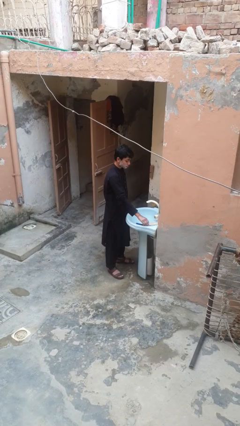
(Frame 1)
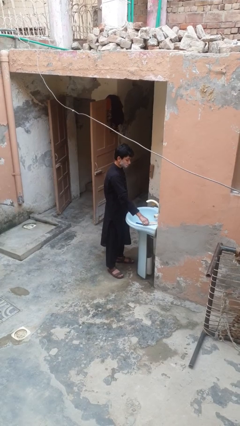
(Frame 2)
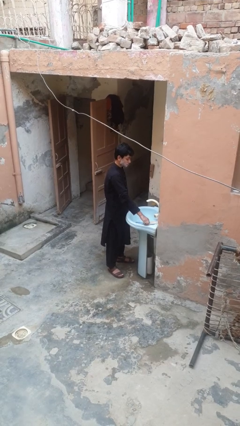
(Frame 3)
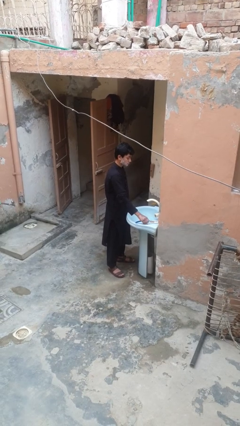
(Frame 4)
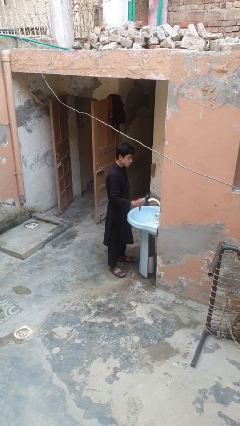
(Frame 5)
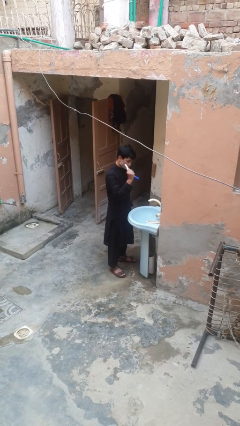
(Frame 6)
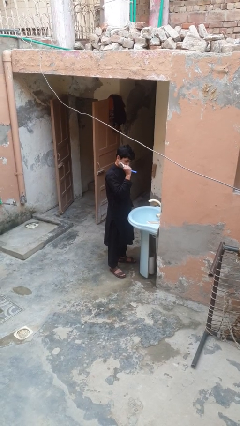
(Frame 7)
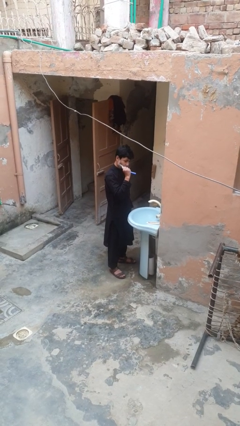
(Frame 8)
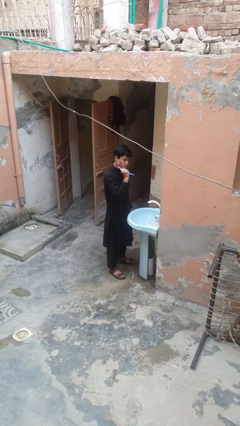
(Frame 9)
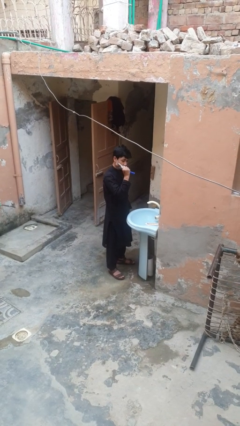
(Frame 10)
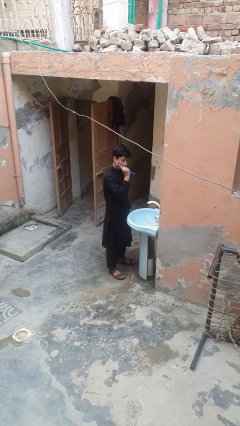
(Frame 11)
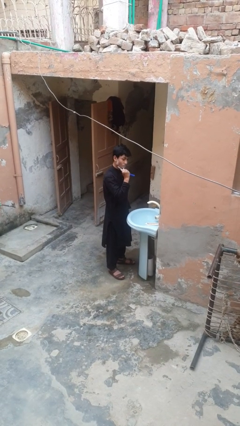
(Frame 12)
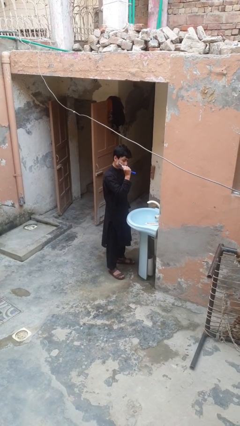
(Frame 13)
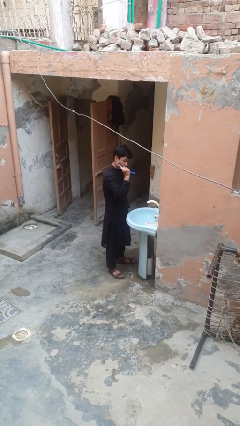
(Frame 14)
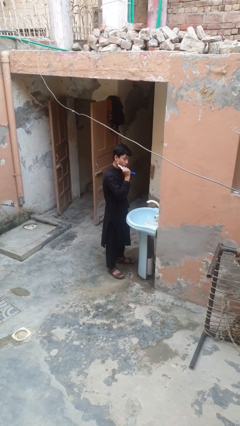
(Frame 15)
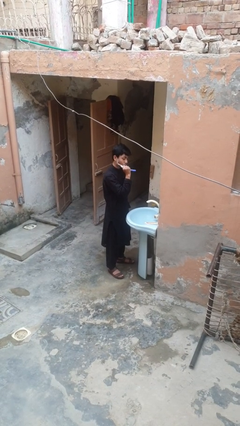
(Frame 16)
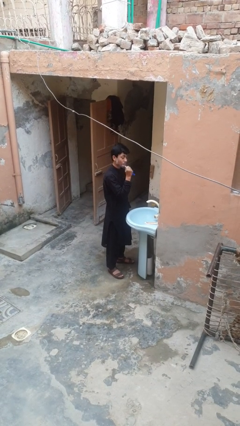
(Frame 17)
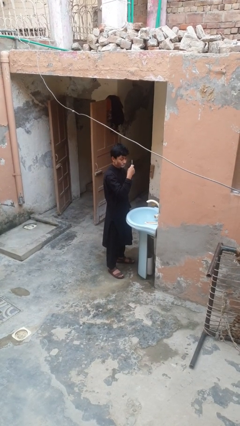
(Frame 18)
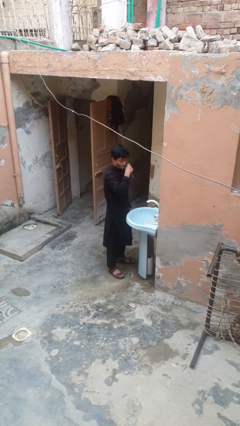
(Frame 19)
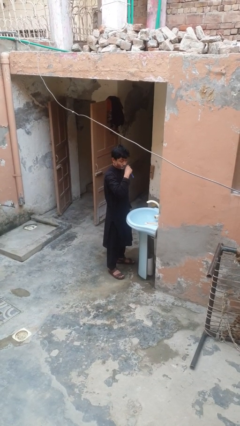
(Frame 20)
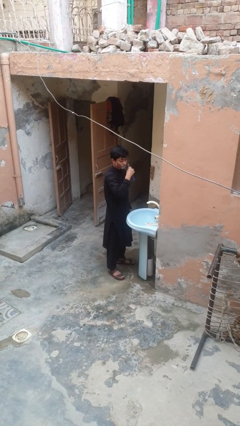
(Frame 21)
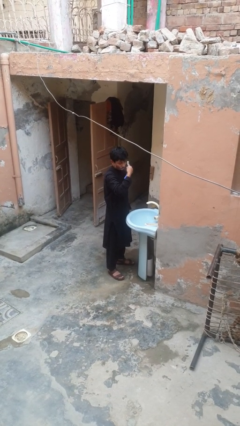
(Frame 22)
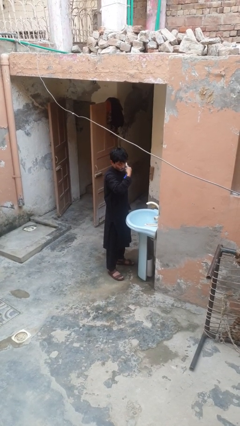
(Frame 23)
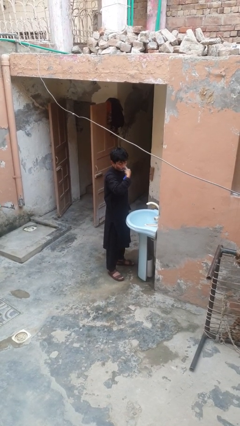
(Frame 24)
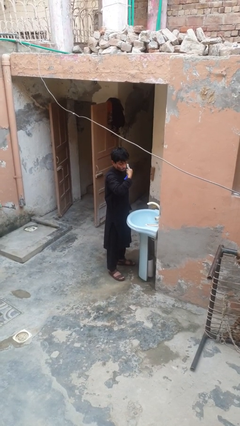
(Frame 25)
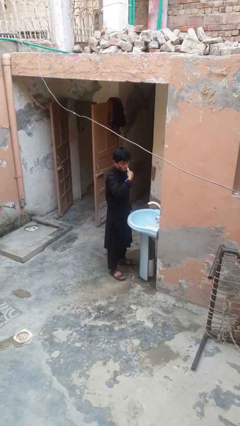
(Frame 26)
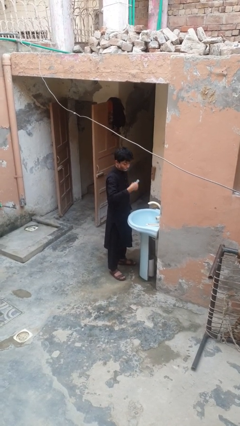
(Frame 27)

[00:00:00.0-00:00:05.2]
person shaves face

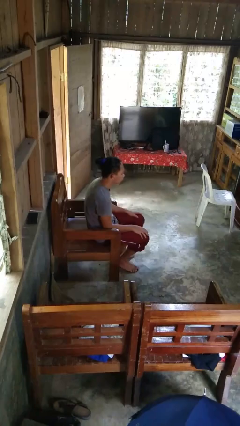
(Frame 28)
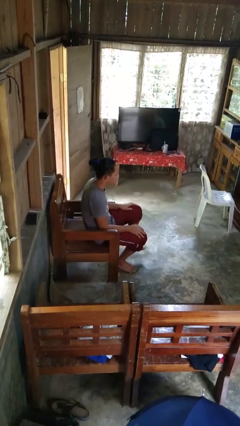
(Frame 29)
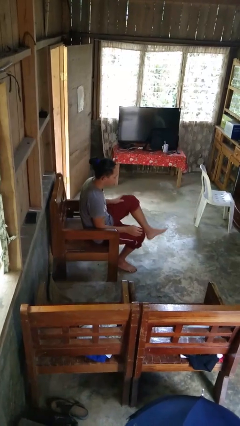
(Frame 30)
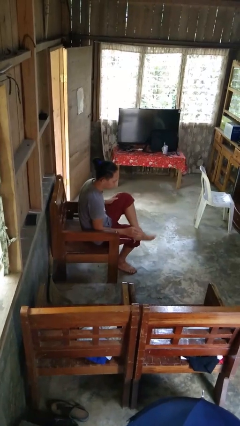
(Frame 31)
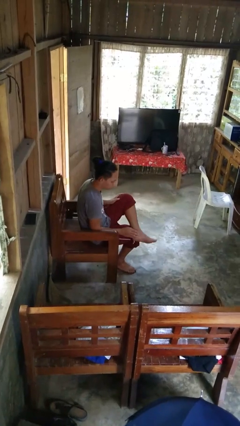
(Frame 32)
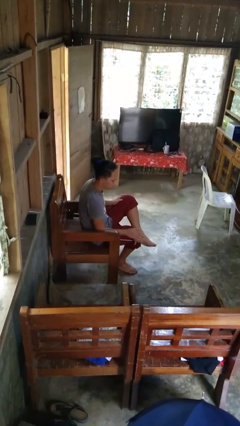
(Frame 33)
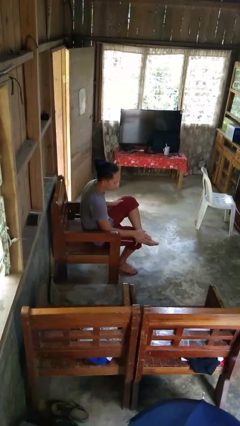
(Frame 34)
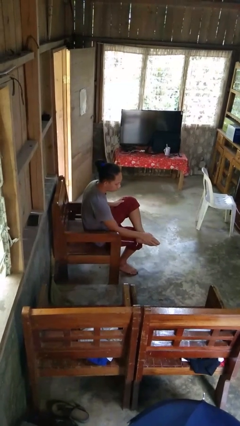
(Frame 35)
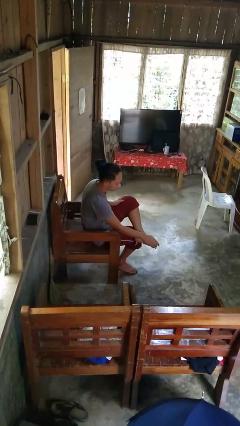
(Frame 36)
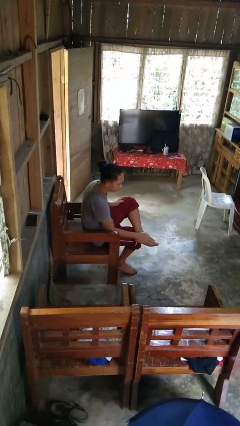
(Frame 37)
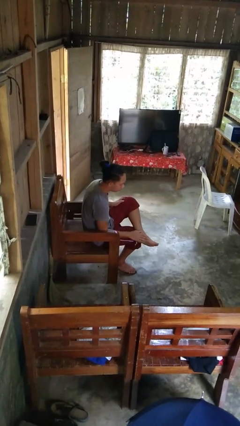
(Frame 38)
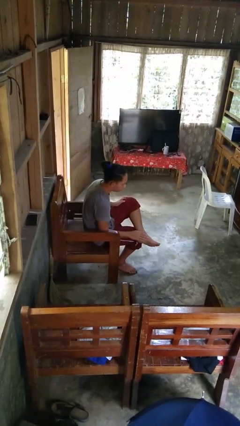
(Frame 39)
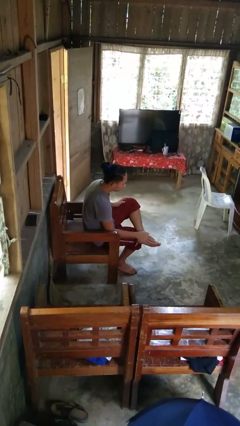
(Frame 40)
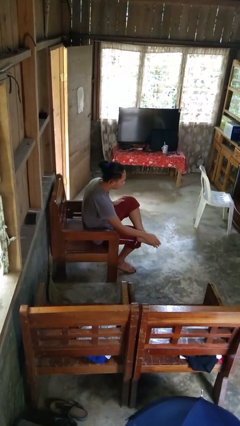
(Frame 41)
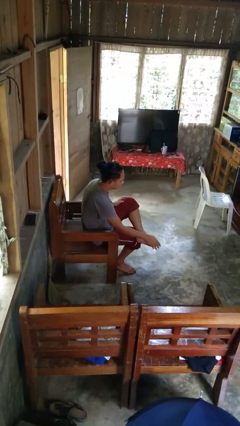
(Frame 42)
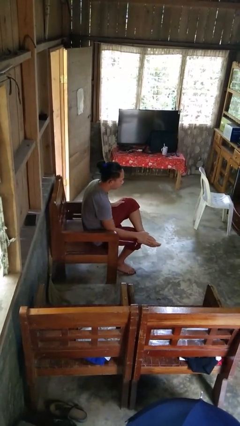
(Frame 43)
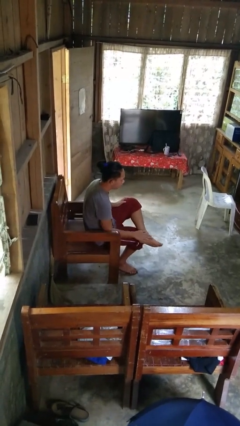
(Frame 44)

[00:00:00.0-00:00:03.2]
person rubs foot

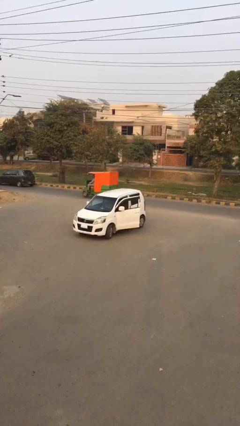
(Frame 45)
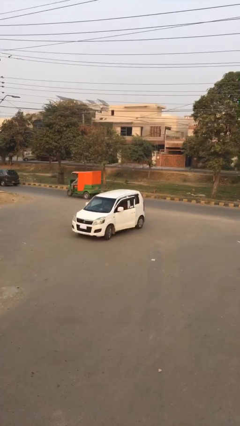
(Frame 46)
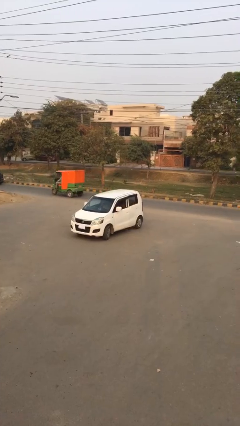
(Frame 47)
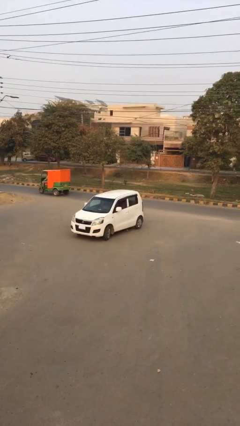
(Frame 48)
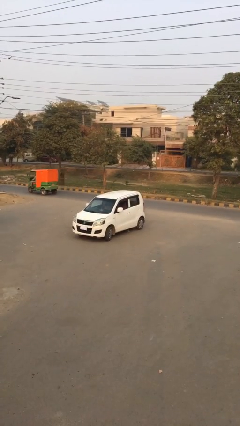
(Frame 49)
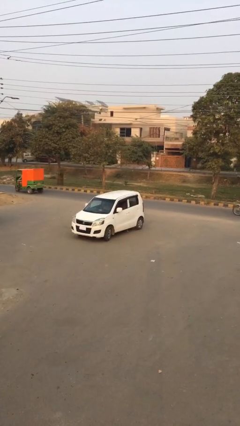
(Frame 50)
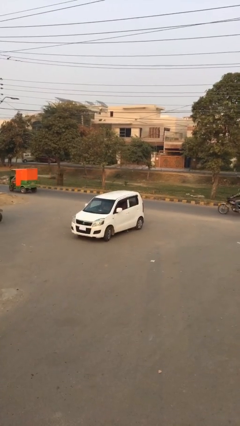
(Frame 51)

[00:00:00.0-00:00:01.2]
person closes car door

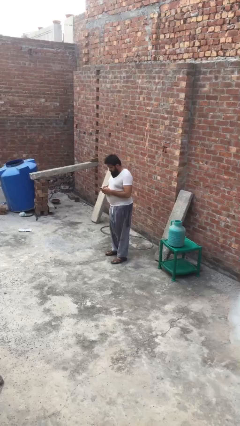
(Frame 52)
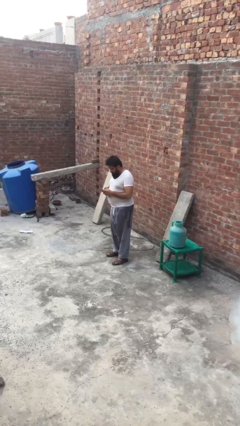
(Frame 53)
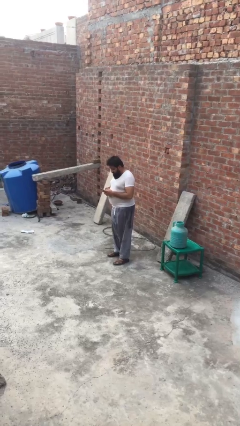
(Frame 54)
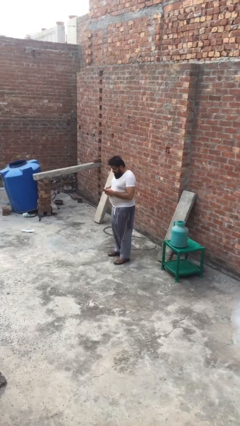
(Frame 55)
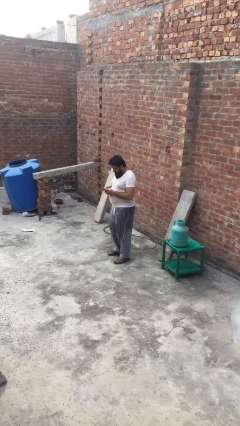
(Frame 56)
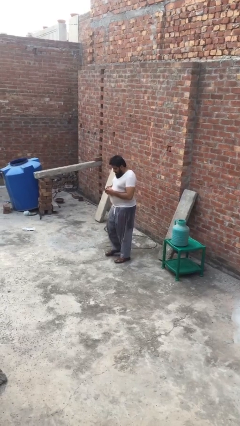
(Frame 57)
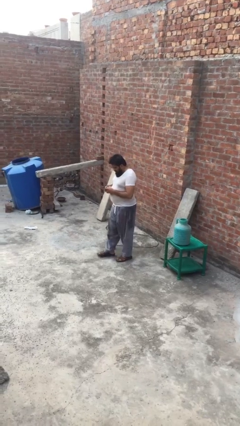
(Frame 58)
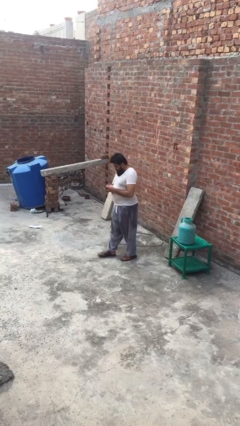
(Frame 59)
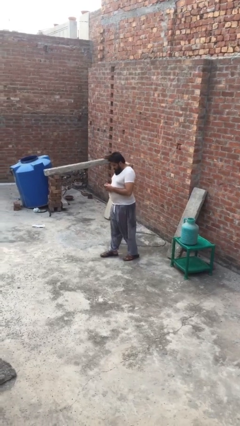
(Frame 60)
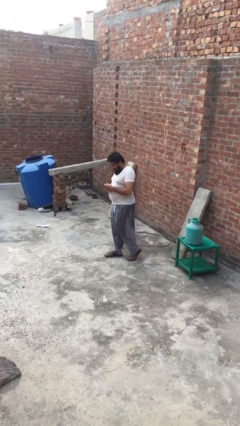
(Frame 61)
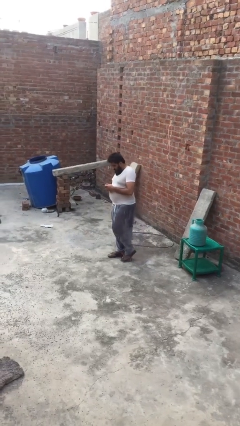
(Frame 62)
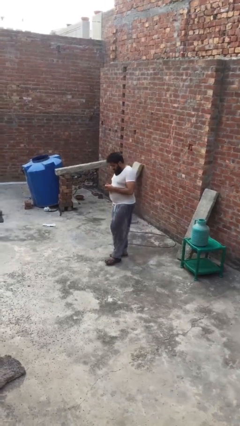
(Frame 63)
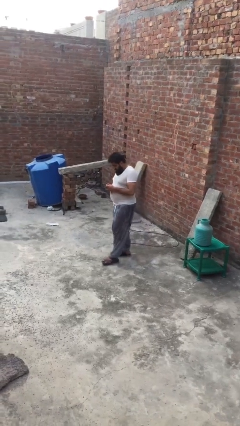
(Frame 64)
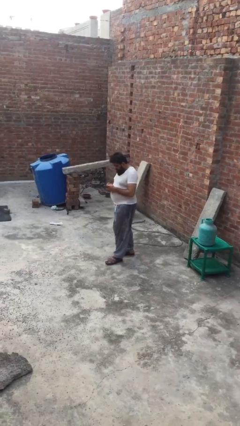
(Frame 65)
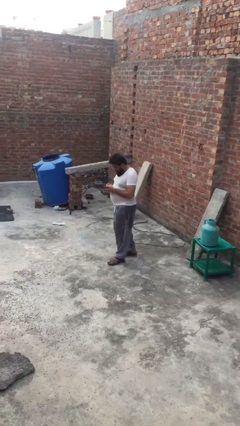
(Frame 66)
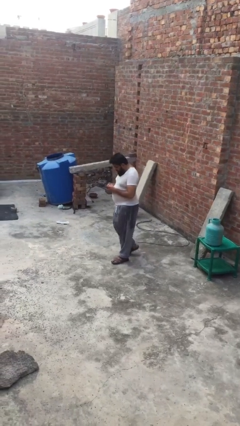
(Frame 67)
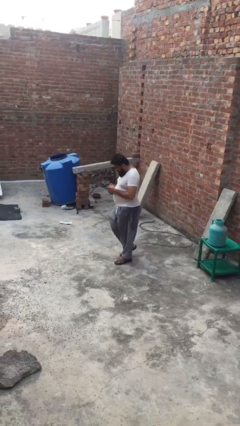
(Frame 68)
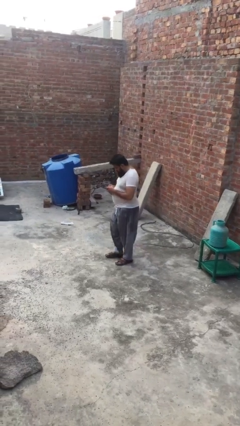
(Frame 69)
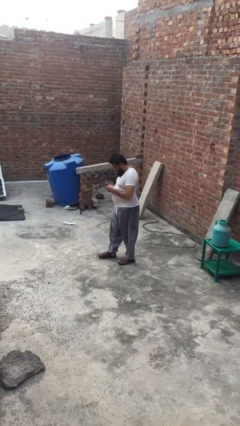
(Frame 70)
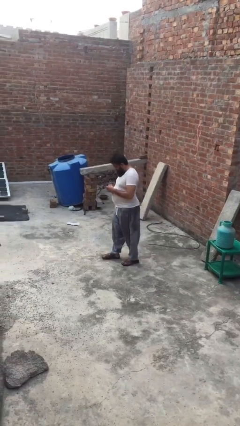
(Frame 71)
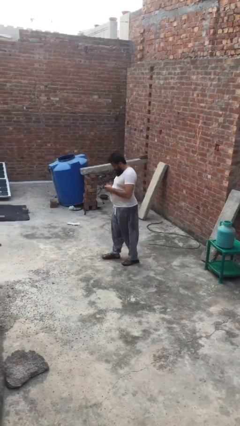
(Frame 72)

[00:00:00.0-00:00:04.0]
person texts on phone

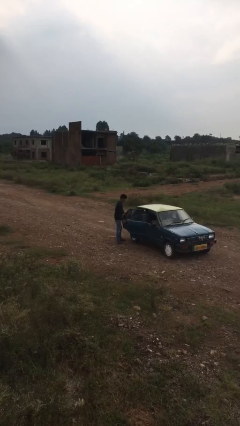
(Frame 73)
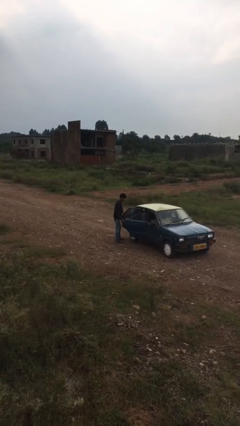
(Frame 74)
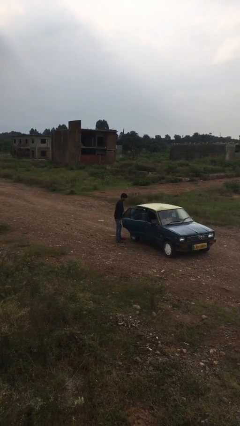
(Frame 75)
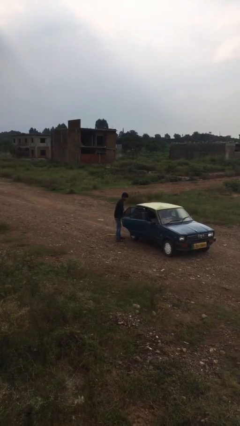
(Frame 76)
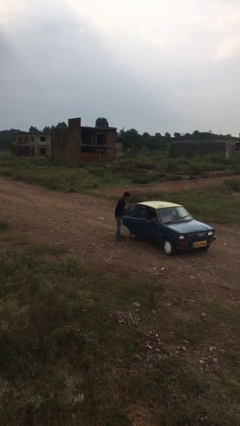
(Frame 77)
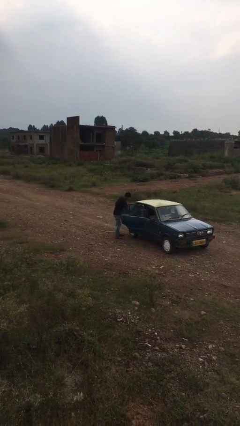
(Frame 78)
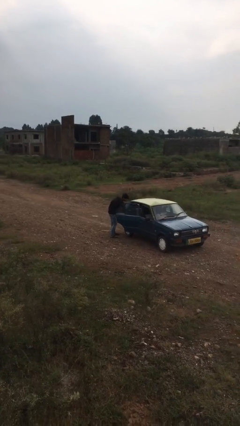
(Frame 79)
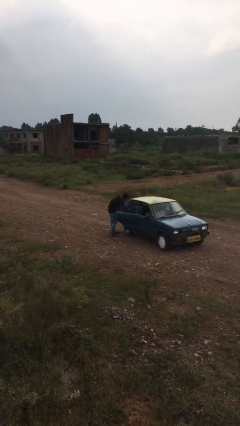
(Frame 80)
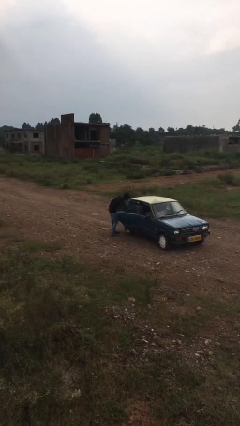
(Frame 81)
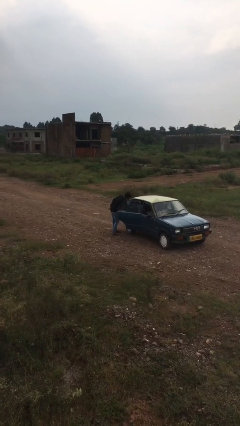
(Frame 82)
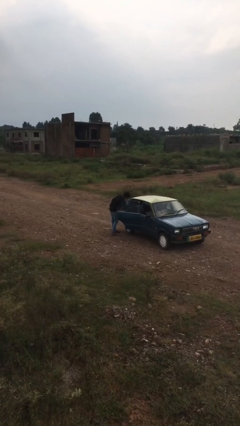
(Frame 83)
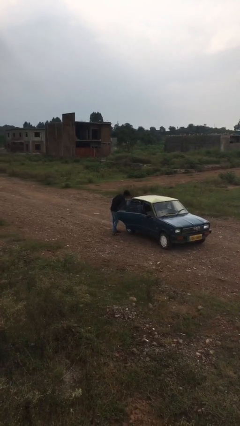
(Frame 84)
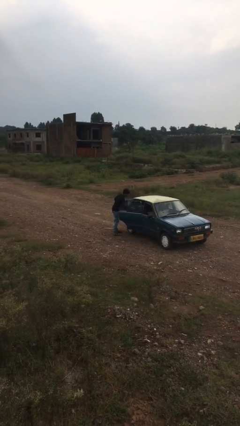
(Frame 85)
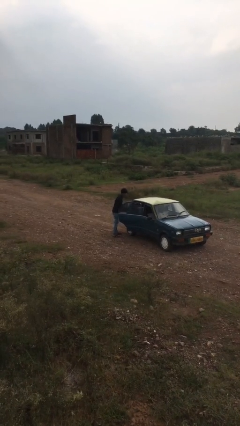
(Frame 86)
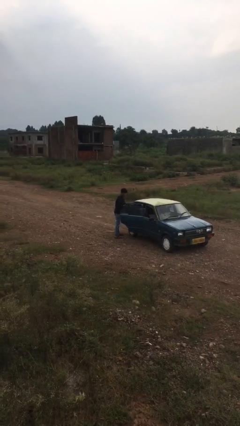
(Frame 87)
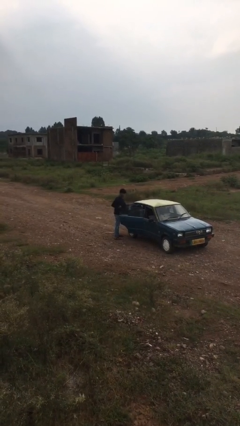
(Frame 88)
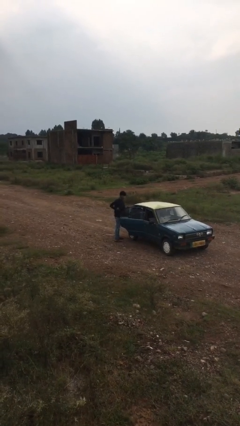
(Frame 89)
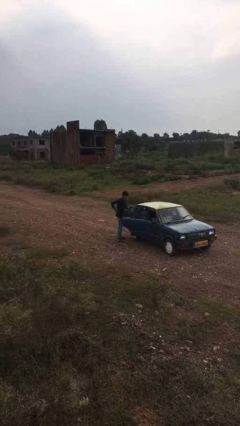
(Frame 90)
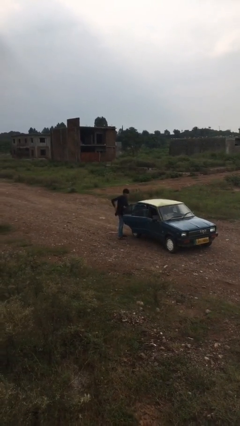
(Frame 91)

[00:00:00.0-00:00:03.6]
person unloads car
